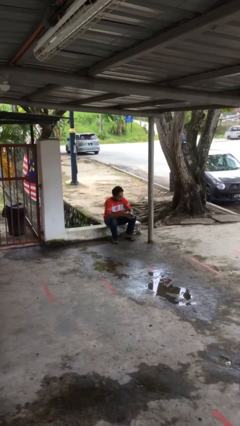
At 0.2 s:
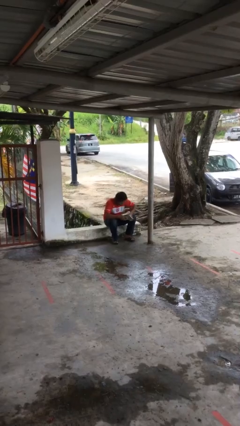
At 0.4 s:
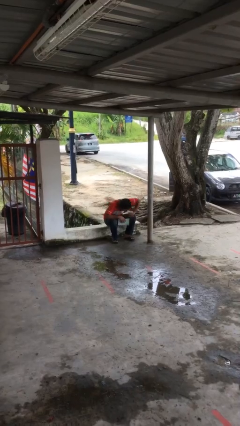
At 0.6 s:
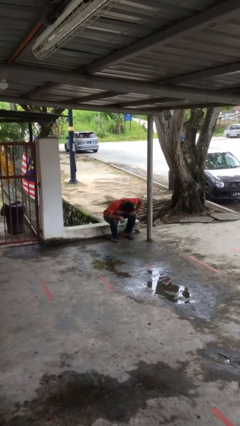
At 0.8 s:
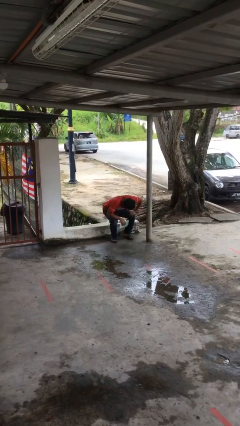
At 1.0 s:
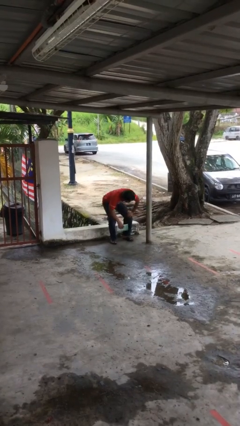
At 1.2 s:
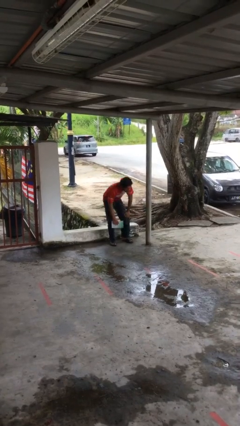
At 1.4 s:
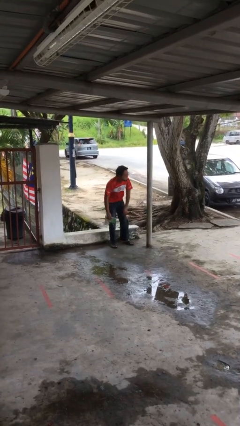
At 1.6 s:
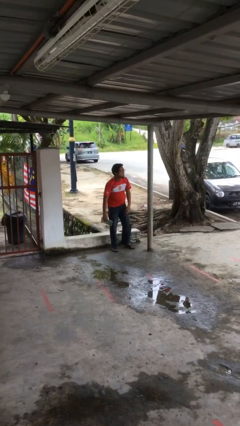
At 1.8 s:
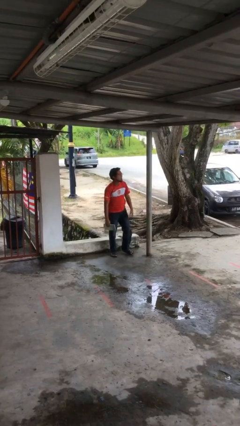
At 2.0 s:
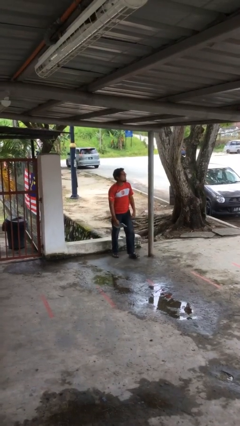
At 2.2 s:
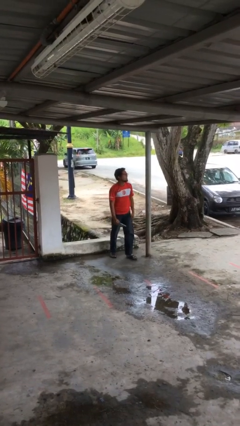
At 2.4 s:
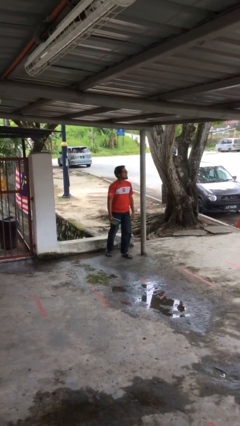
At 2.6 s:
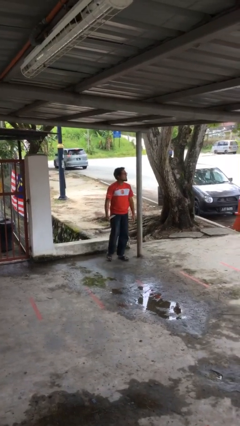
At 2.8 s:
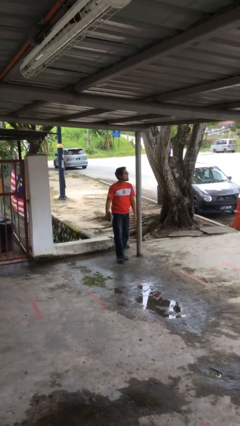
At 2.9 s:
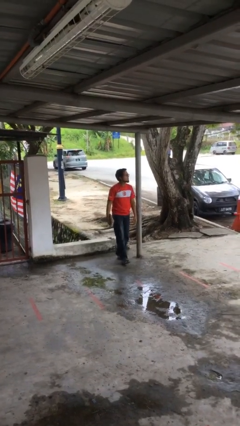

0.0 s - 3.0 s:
person stands up

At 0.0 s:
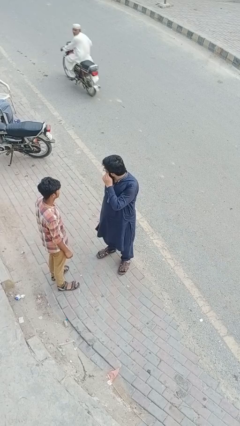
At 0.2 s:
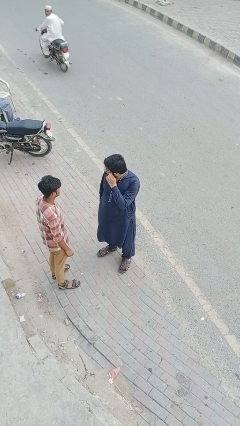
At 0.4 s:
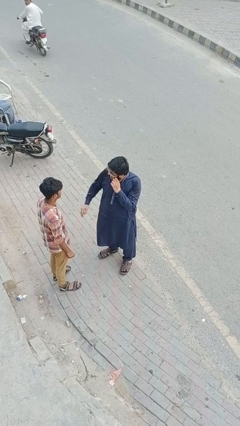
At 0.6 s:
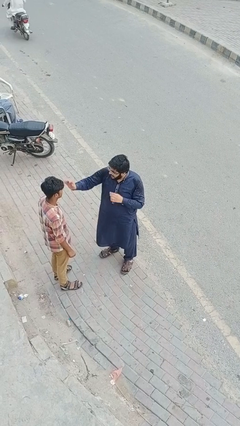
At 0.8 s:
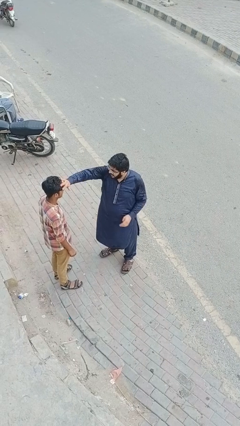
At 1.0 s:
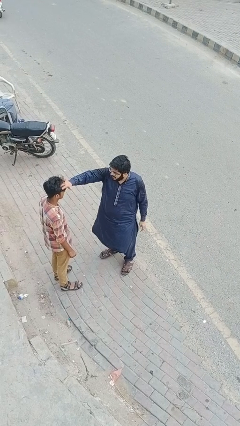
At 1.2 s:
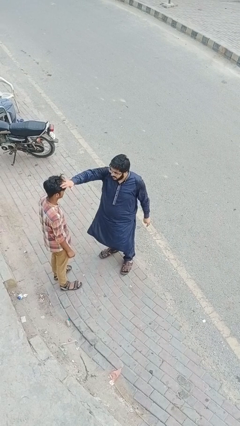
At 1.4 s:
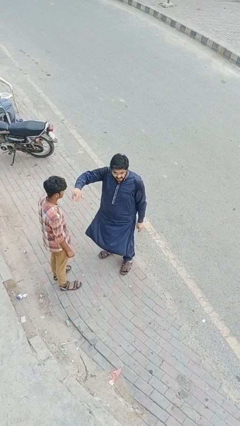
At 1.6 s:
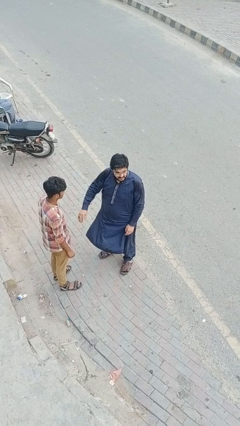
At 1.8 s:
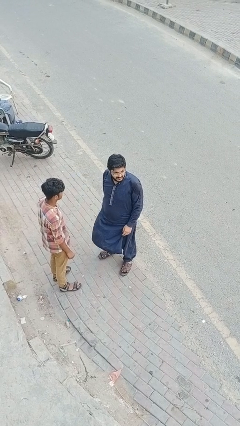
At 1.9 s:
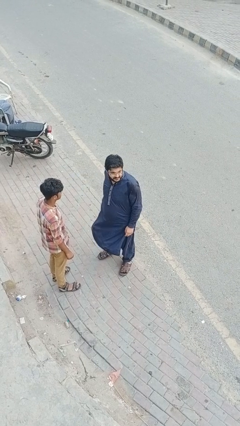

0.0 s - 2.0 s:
person grabs person by hair

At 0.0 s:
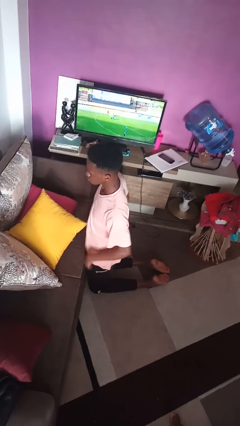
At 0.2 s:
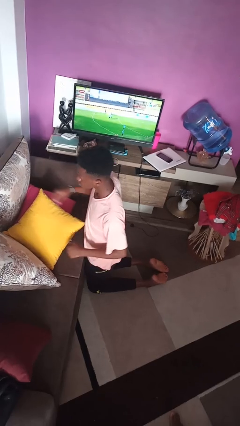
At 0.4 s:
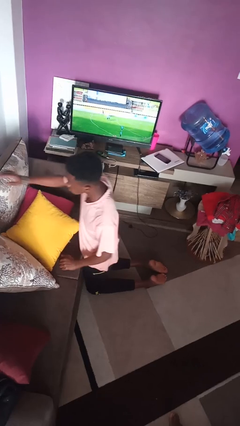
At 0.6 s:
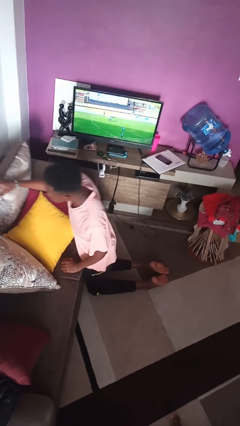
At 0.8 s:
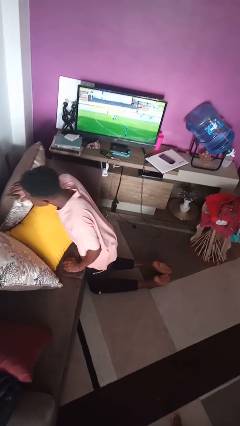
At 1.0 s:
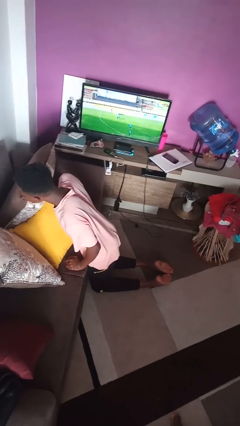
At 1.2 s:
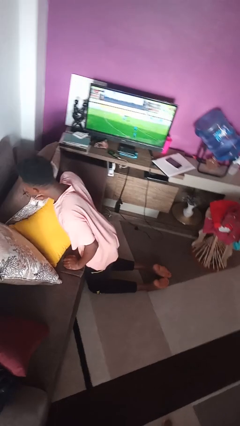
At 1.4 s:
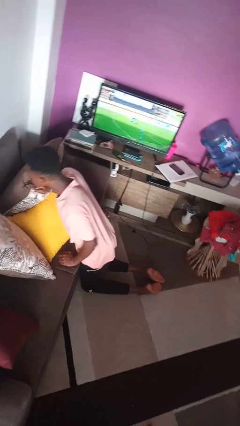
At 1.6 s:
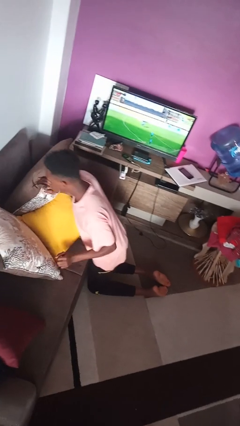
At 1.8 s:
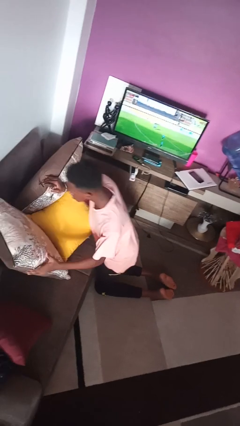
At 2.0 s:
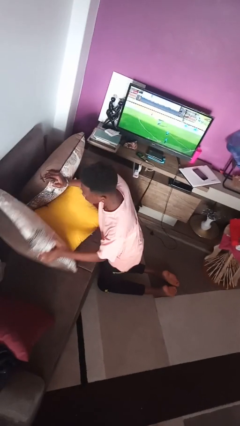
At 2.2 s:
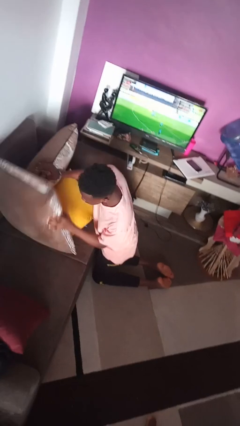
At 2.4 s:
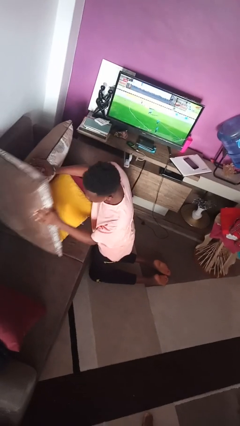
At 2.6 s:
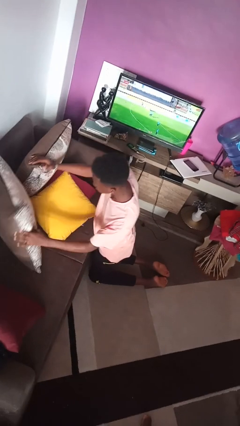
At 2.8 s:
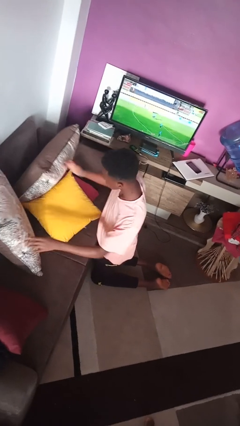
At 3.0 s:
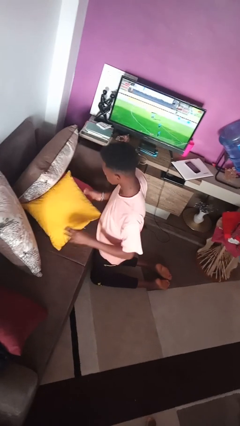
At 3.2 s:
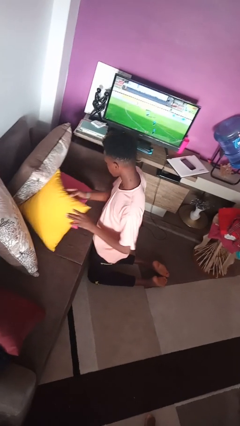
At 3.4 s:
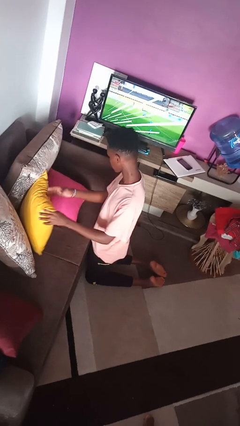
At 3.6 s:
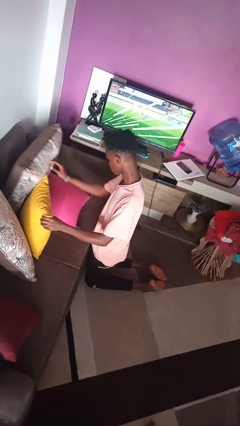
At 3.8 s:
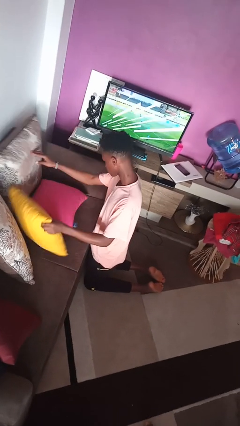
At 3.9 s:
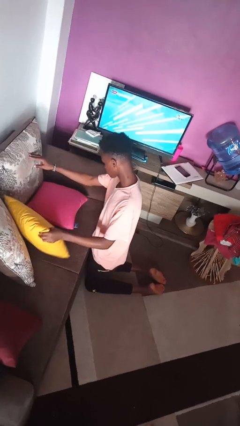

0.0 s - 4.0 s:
person searches in couch

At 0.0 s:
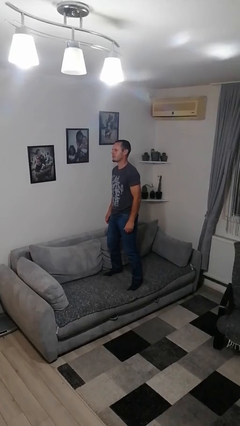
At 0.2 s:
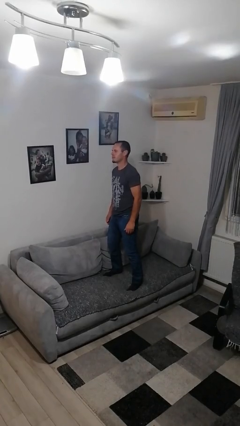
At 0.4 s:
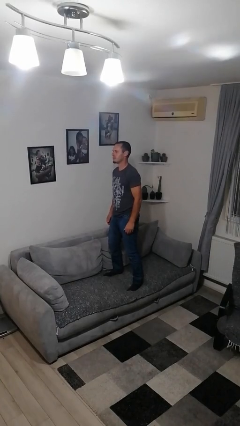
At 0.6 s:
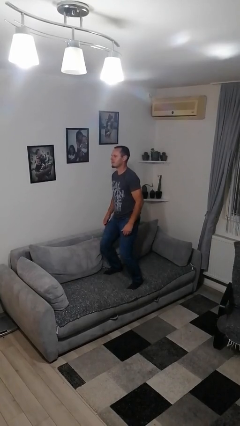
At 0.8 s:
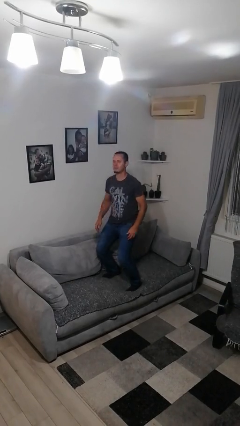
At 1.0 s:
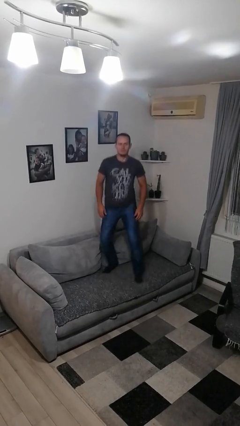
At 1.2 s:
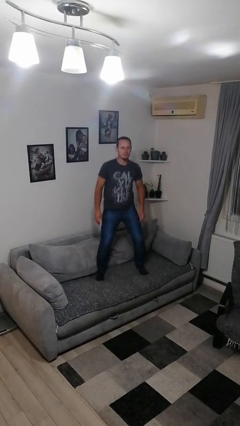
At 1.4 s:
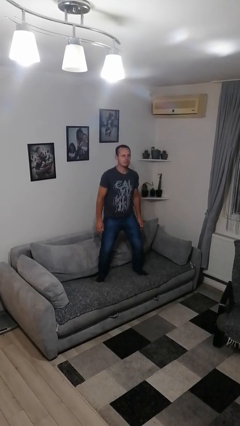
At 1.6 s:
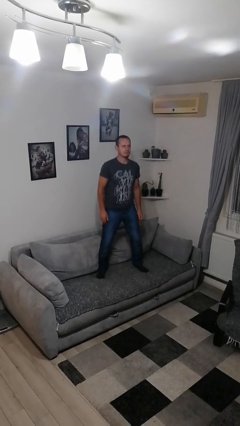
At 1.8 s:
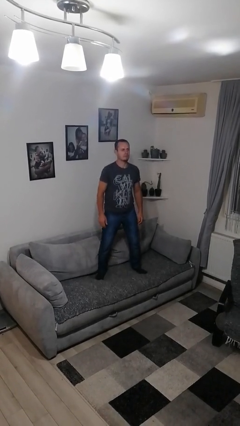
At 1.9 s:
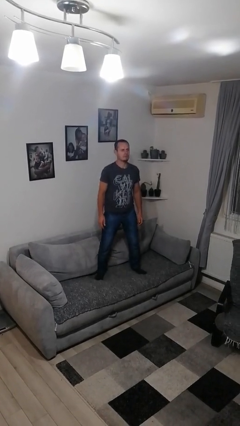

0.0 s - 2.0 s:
person jumps on couch

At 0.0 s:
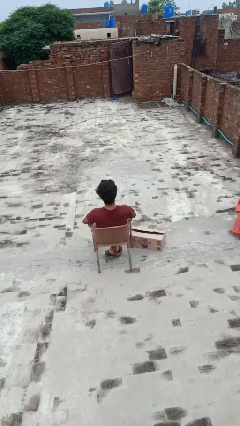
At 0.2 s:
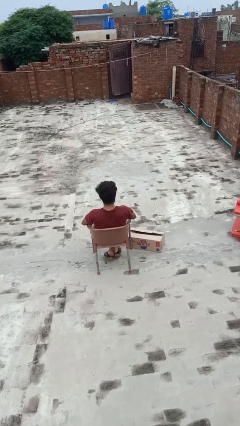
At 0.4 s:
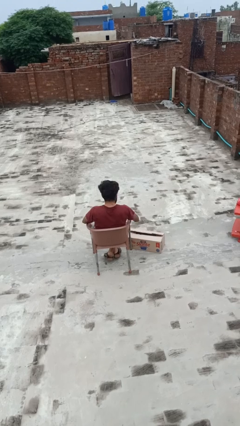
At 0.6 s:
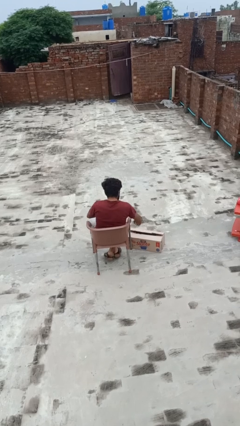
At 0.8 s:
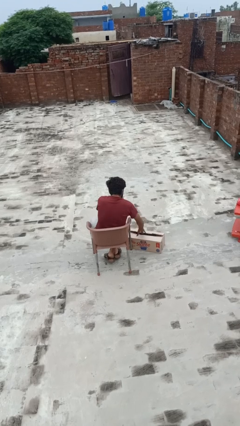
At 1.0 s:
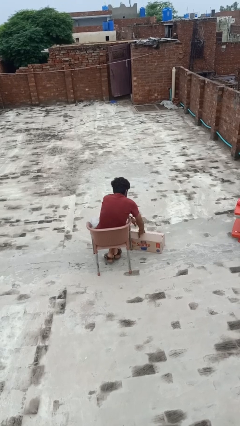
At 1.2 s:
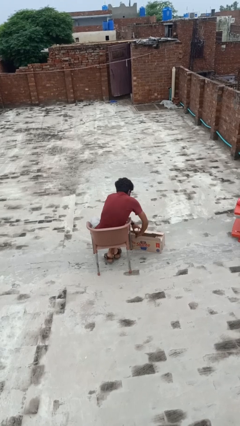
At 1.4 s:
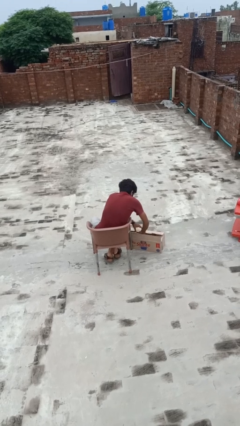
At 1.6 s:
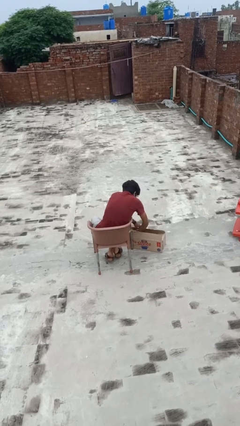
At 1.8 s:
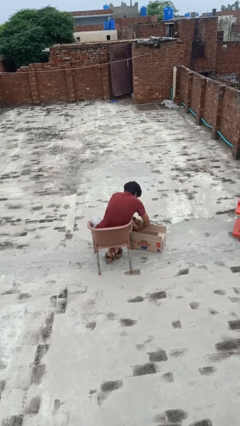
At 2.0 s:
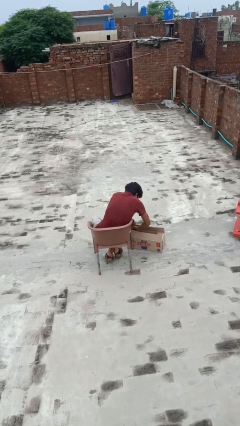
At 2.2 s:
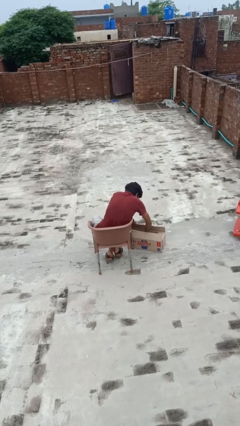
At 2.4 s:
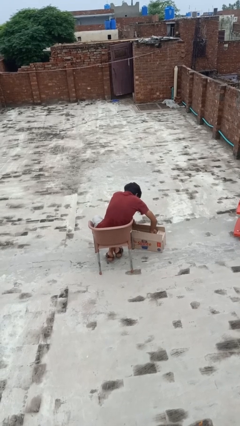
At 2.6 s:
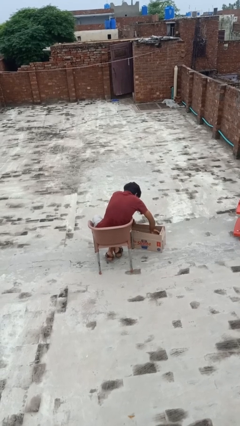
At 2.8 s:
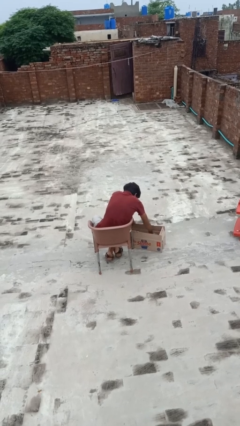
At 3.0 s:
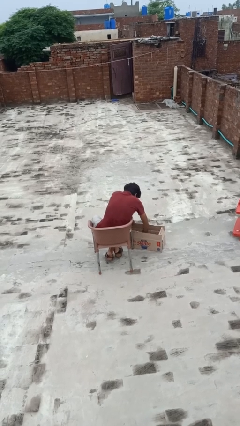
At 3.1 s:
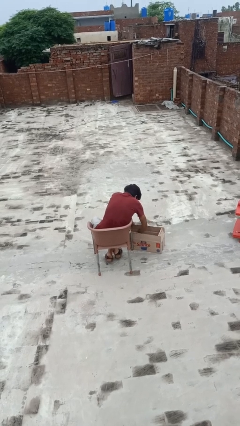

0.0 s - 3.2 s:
person searches in bag

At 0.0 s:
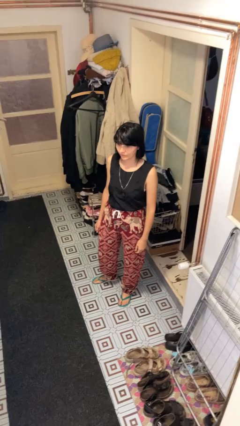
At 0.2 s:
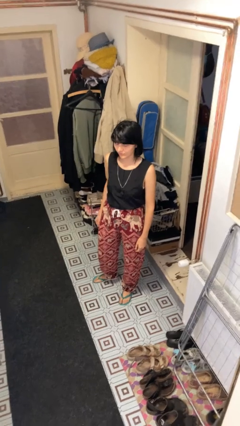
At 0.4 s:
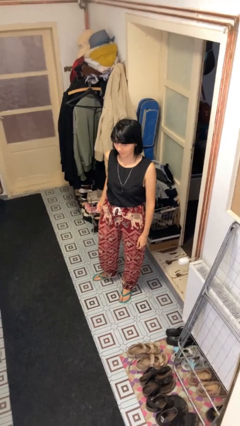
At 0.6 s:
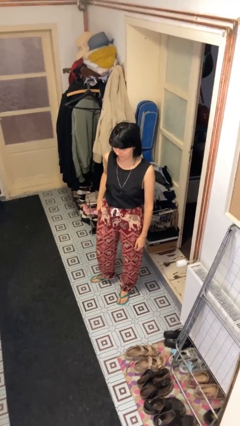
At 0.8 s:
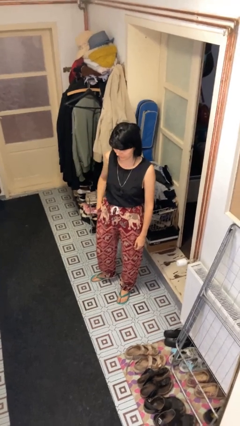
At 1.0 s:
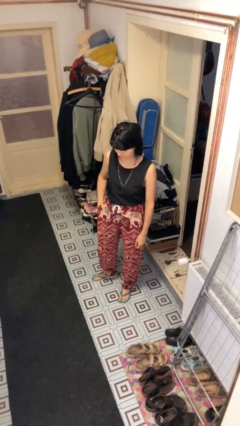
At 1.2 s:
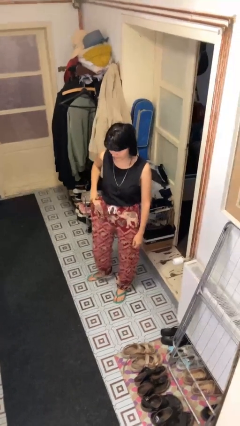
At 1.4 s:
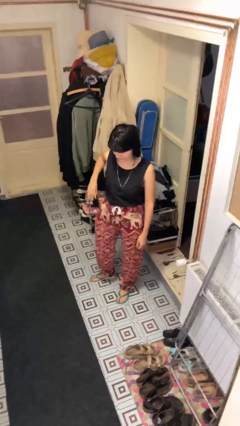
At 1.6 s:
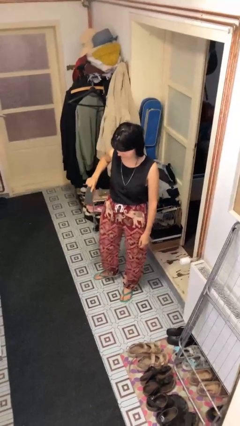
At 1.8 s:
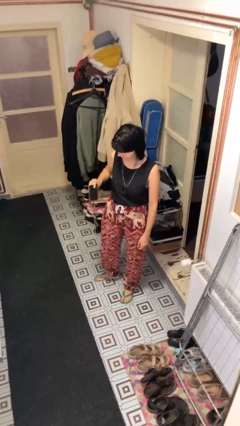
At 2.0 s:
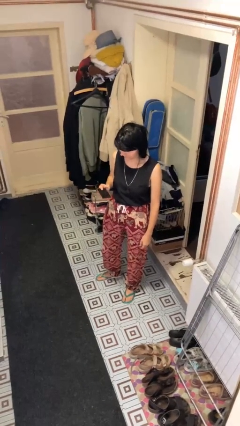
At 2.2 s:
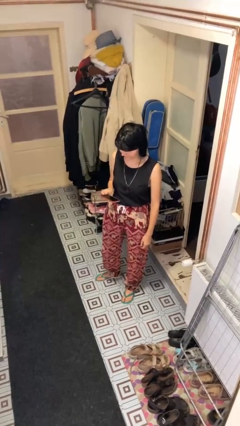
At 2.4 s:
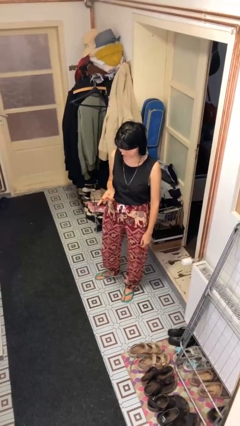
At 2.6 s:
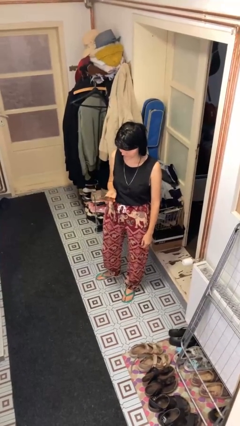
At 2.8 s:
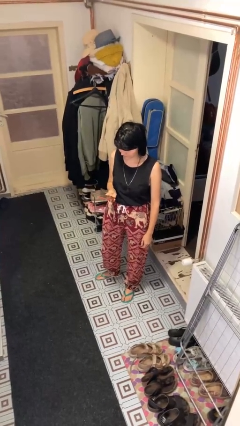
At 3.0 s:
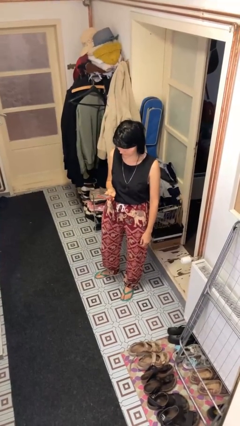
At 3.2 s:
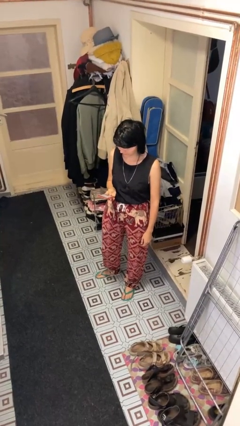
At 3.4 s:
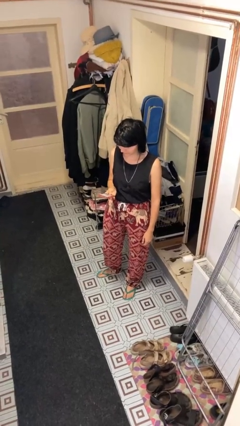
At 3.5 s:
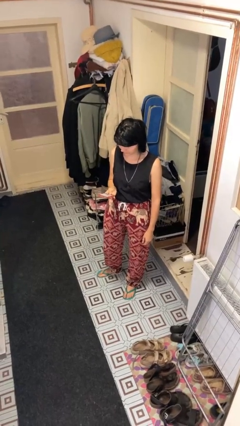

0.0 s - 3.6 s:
person takes phone from pocket
